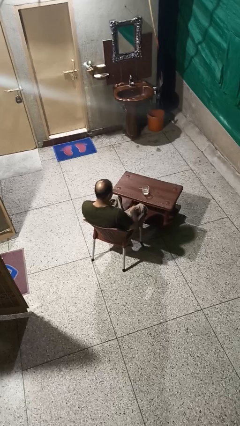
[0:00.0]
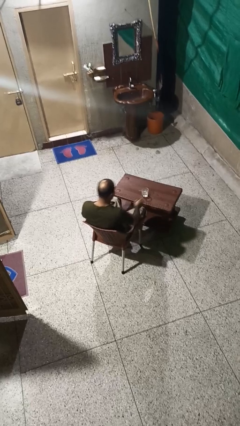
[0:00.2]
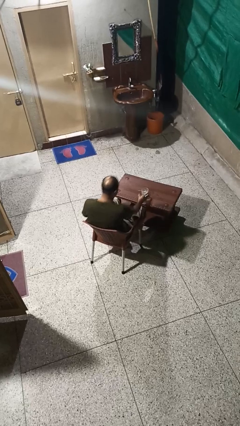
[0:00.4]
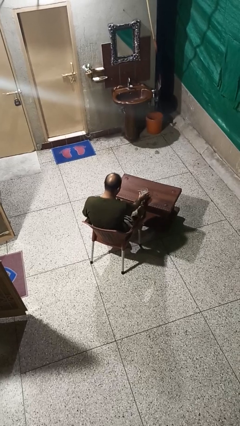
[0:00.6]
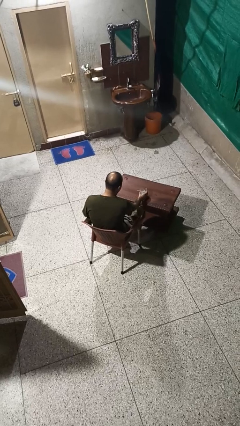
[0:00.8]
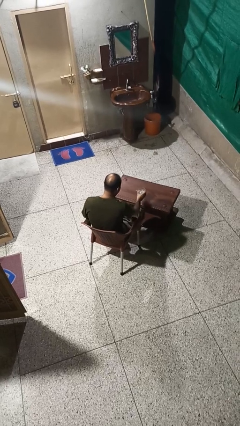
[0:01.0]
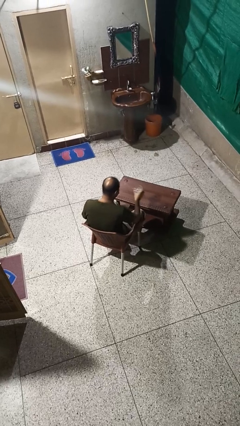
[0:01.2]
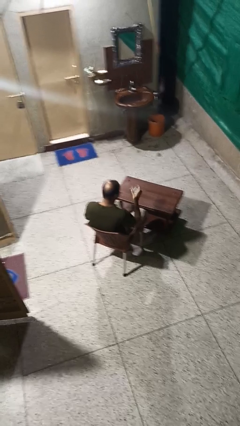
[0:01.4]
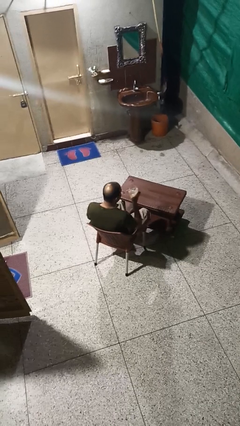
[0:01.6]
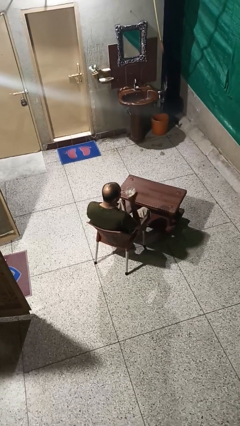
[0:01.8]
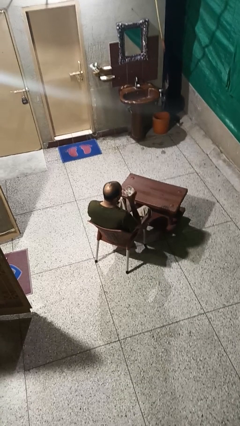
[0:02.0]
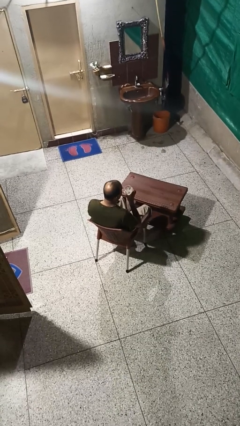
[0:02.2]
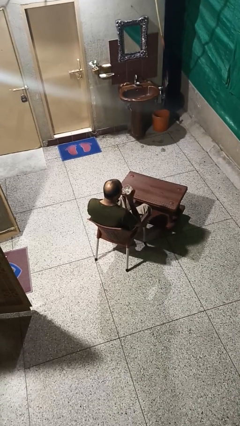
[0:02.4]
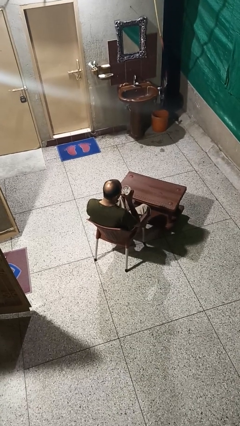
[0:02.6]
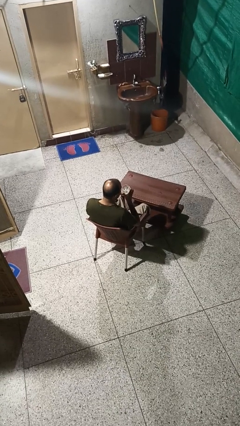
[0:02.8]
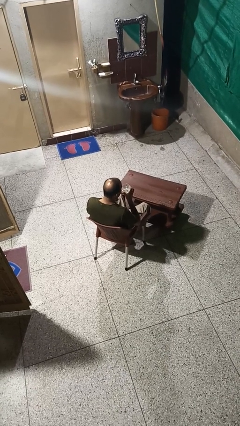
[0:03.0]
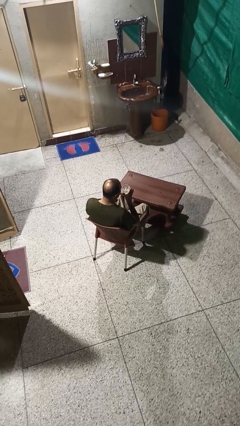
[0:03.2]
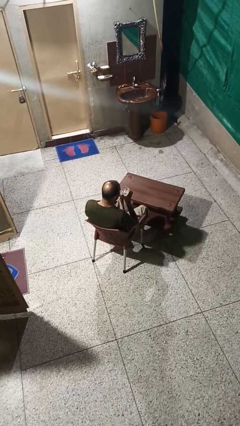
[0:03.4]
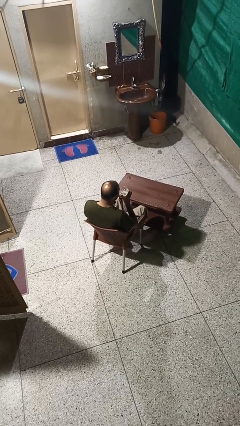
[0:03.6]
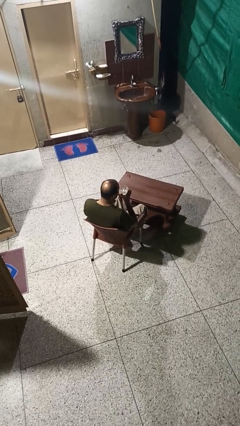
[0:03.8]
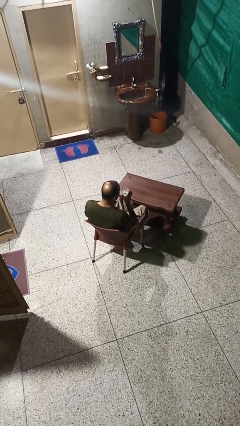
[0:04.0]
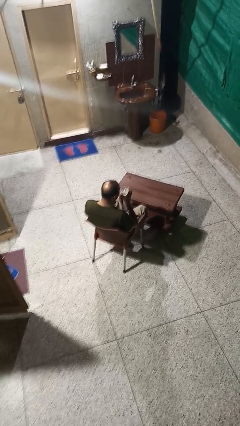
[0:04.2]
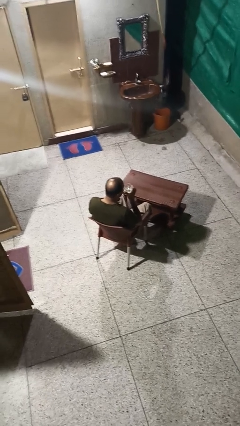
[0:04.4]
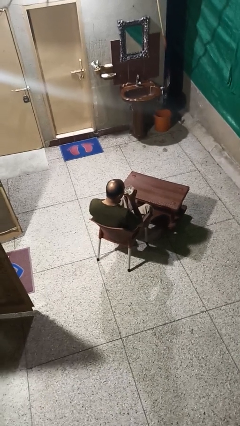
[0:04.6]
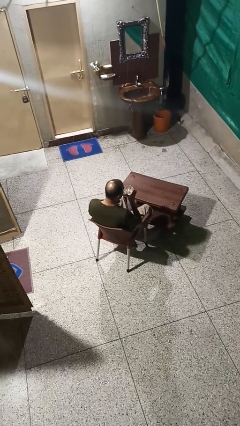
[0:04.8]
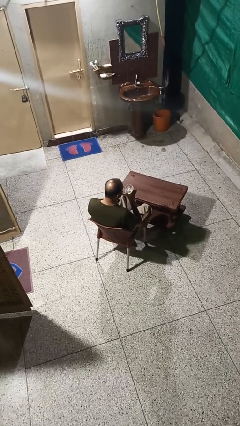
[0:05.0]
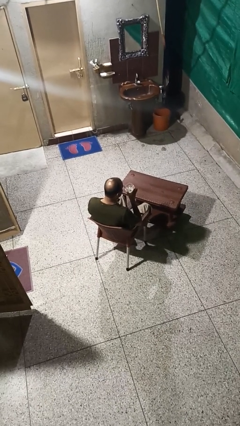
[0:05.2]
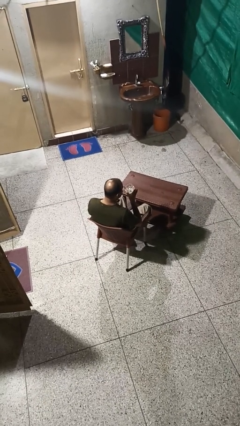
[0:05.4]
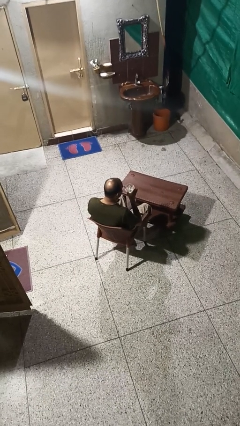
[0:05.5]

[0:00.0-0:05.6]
person drinks from straw

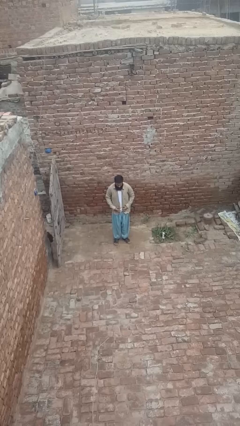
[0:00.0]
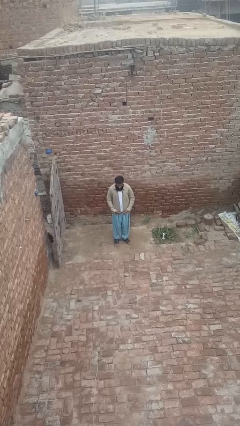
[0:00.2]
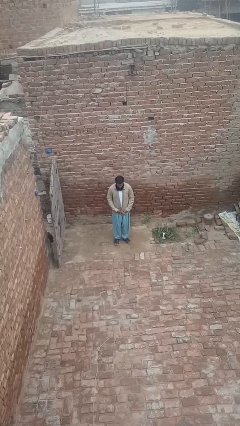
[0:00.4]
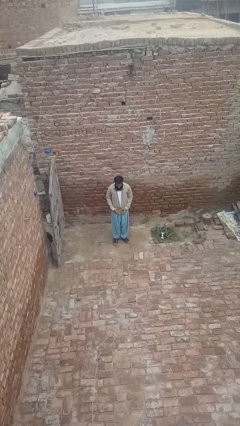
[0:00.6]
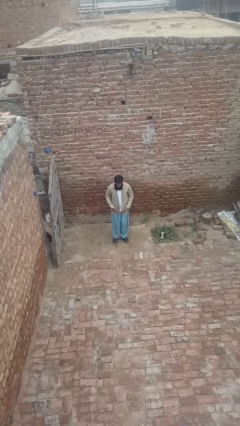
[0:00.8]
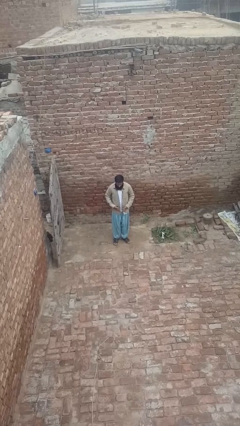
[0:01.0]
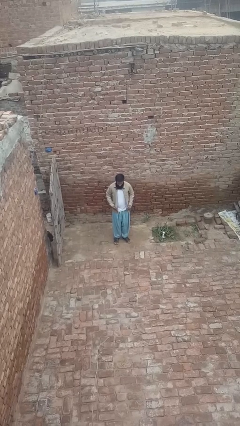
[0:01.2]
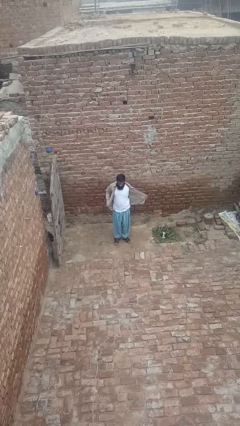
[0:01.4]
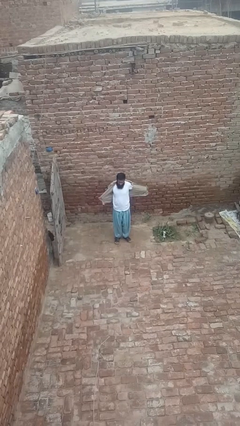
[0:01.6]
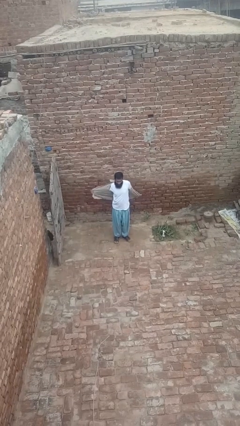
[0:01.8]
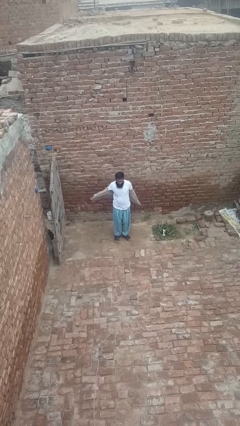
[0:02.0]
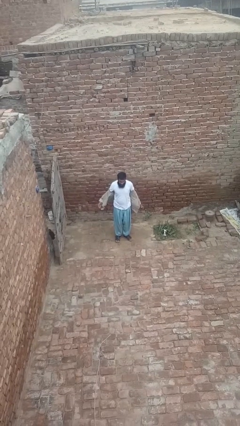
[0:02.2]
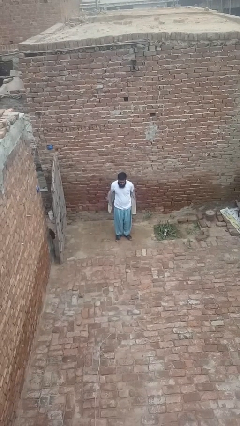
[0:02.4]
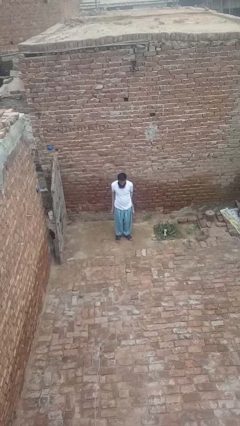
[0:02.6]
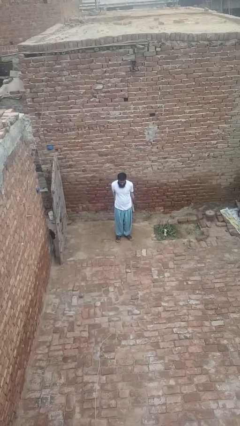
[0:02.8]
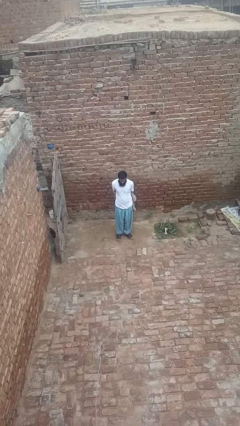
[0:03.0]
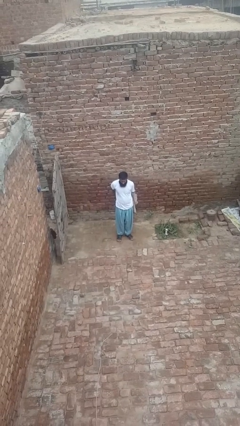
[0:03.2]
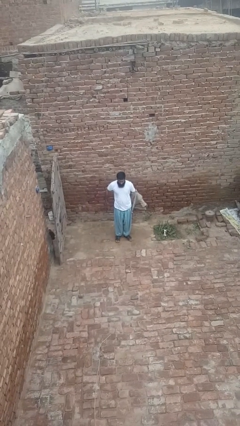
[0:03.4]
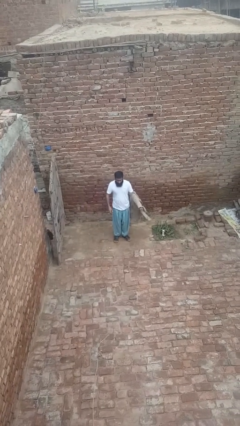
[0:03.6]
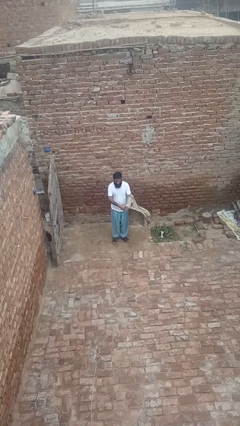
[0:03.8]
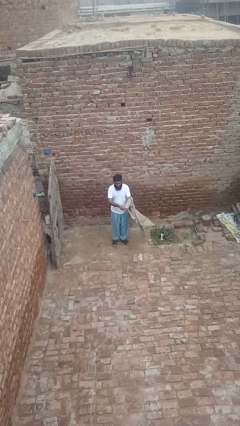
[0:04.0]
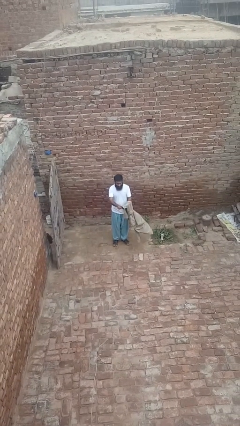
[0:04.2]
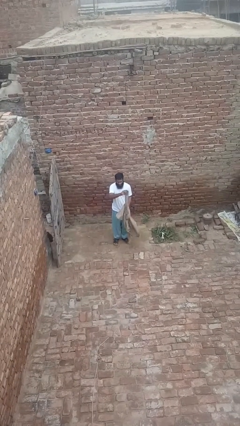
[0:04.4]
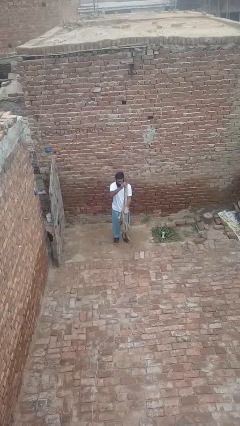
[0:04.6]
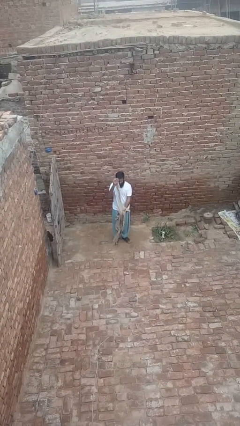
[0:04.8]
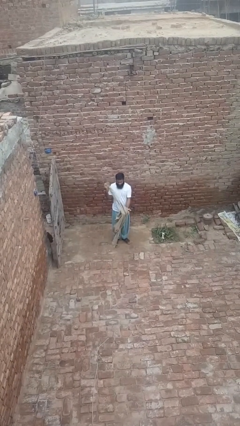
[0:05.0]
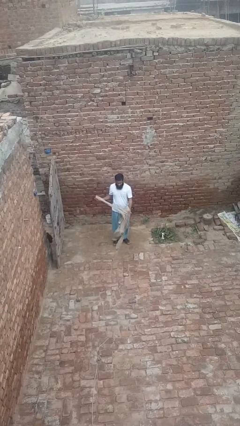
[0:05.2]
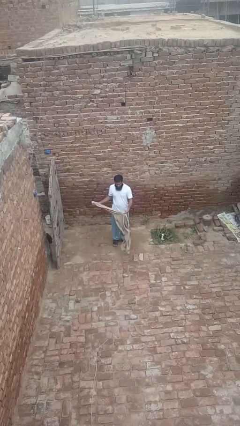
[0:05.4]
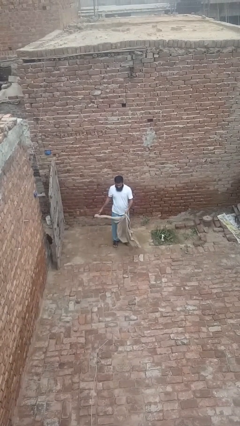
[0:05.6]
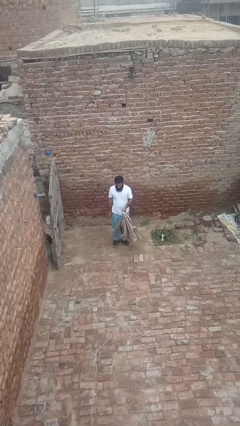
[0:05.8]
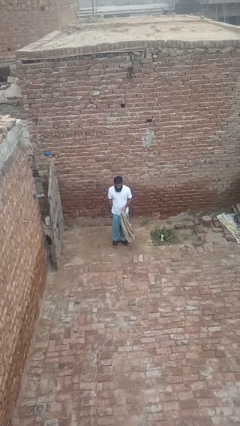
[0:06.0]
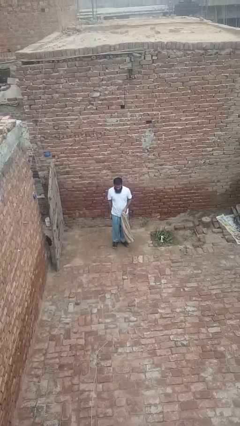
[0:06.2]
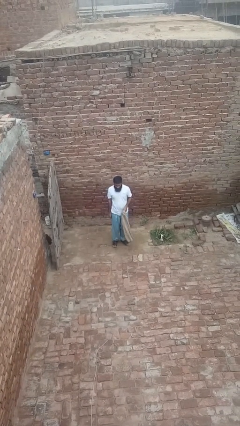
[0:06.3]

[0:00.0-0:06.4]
person takes off shirt

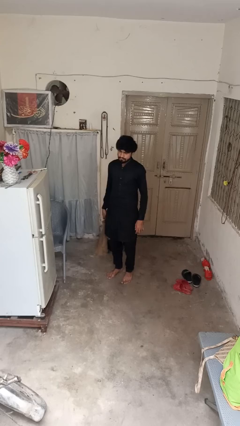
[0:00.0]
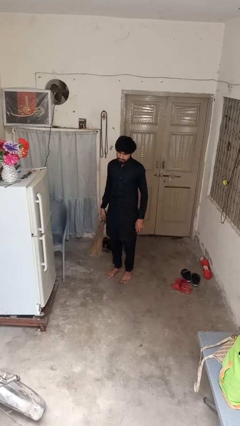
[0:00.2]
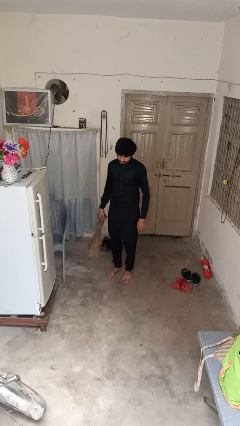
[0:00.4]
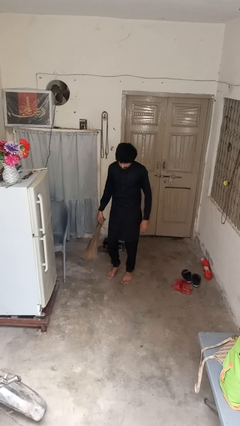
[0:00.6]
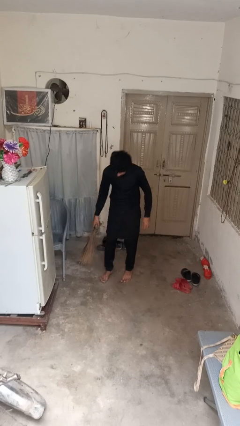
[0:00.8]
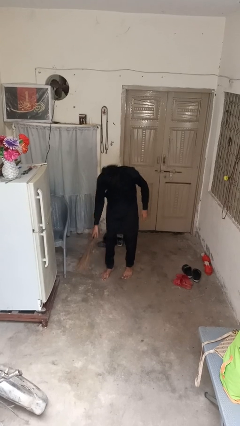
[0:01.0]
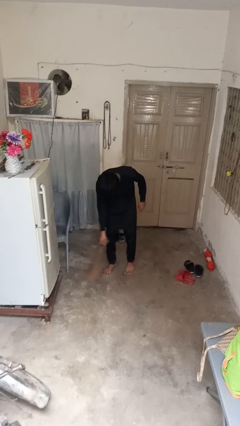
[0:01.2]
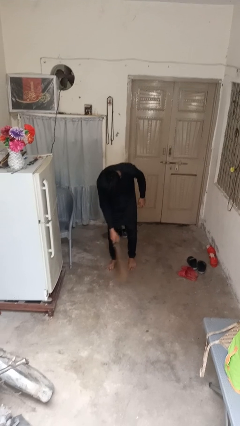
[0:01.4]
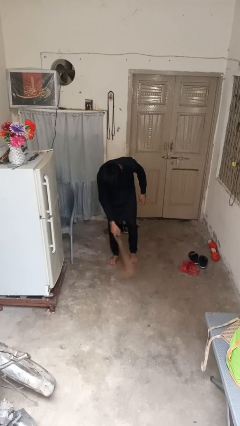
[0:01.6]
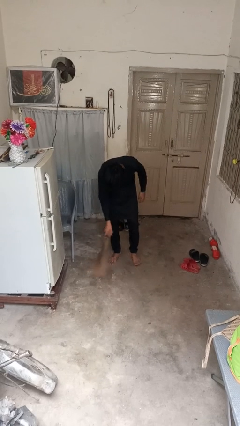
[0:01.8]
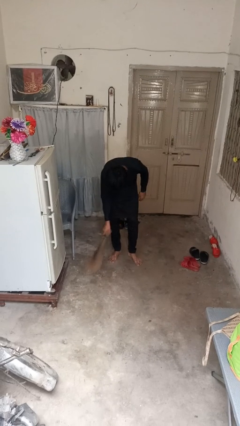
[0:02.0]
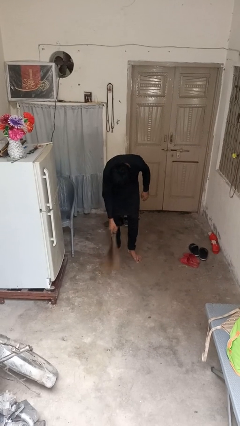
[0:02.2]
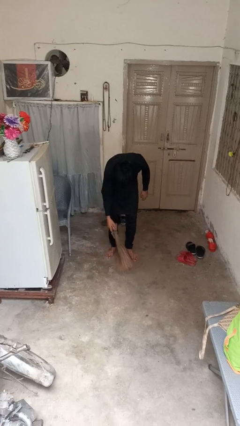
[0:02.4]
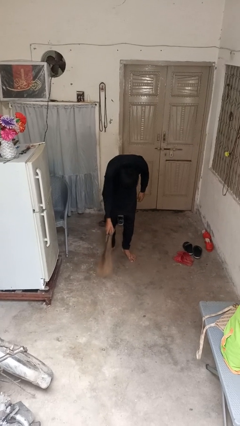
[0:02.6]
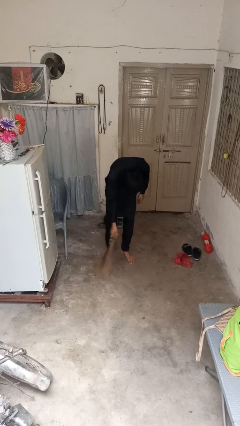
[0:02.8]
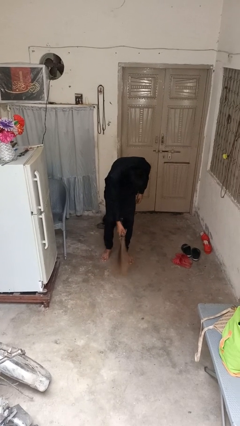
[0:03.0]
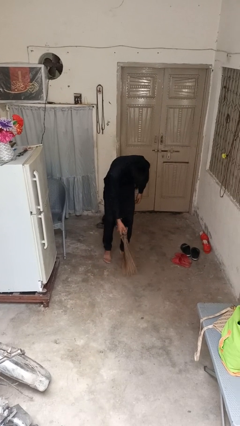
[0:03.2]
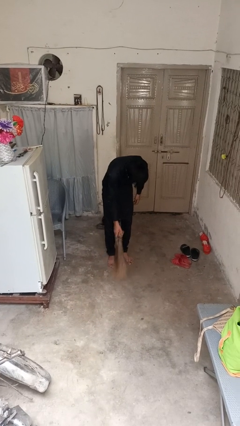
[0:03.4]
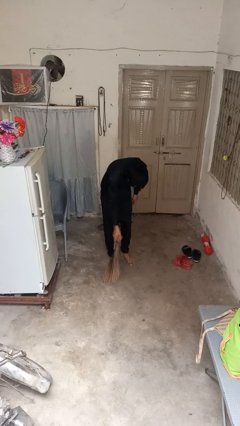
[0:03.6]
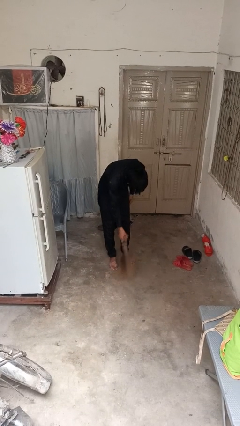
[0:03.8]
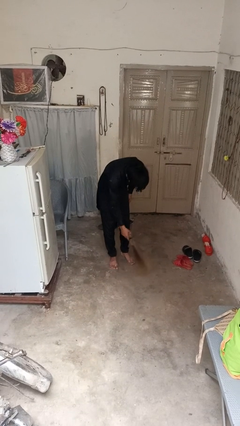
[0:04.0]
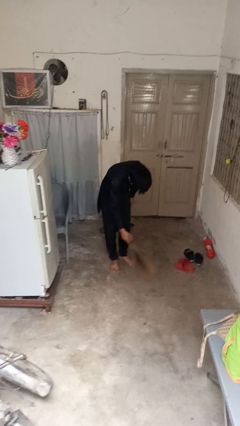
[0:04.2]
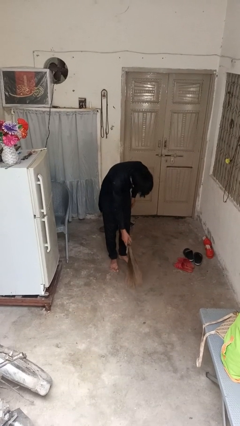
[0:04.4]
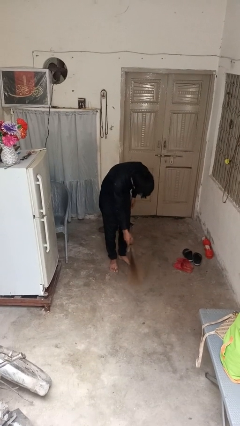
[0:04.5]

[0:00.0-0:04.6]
person sweeps floor

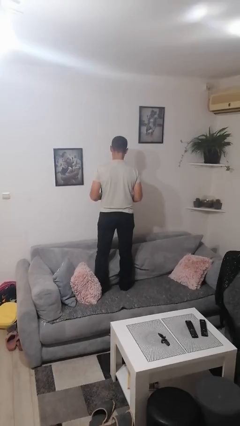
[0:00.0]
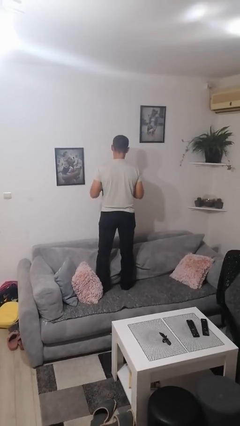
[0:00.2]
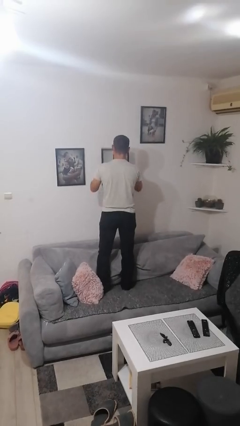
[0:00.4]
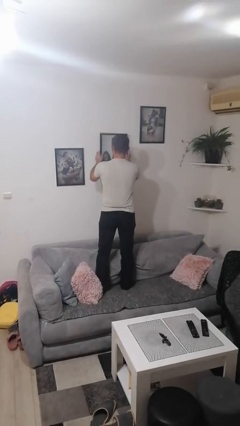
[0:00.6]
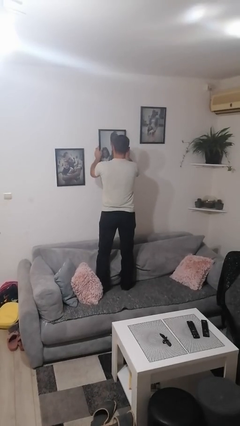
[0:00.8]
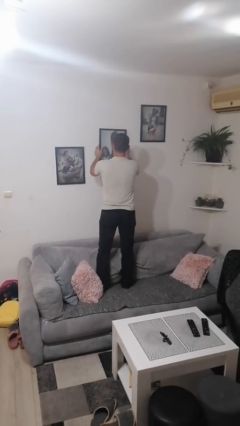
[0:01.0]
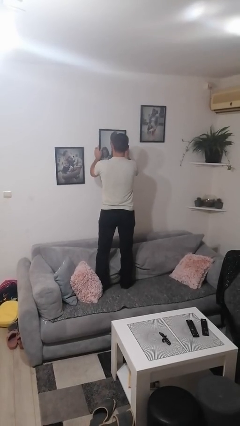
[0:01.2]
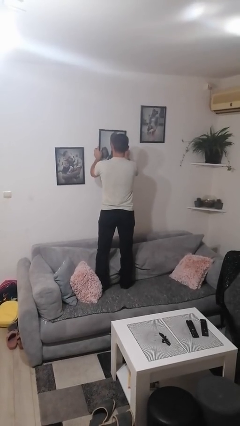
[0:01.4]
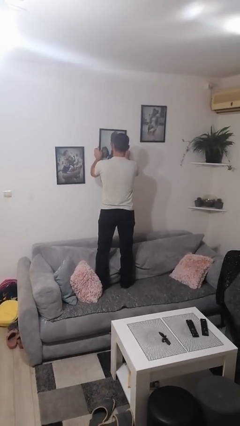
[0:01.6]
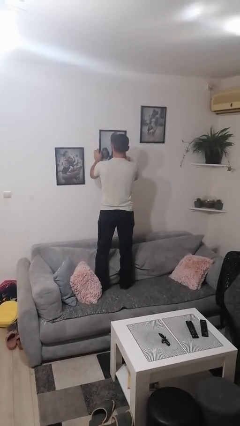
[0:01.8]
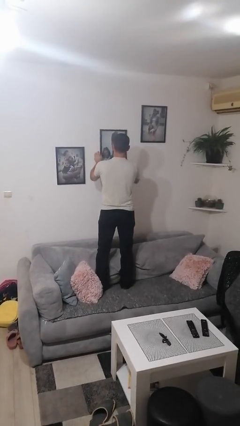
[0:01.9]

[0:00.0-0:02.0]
person puts up picture frame
